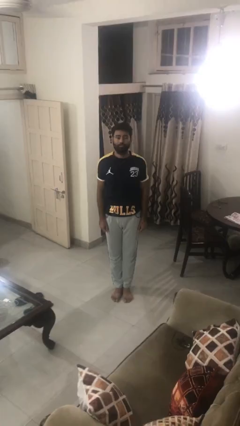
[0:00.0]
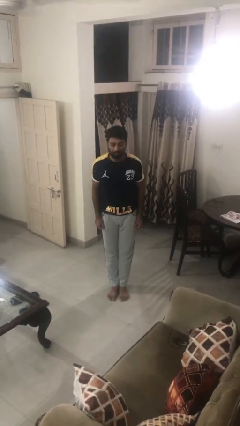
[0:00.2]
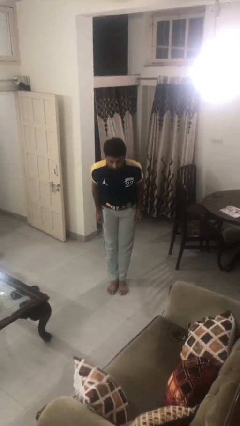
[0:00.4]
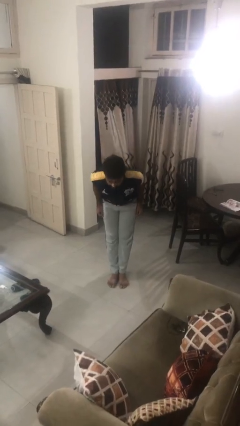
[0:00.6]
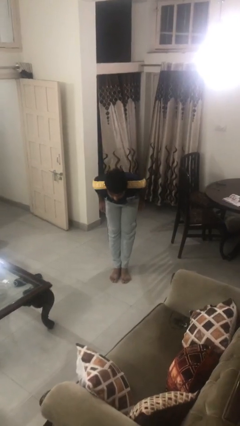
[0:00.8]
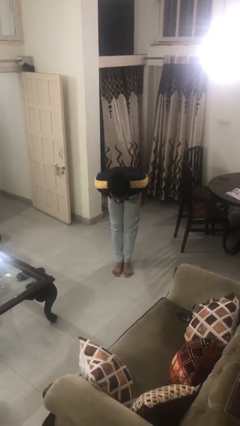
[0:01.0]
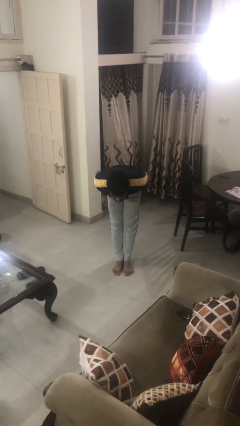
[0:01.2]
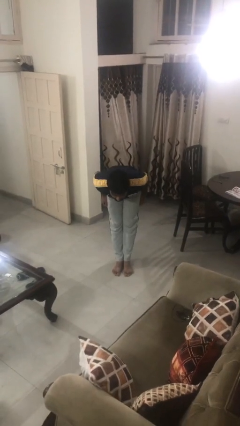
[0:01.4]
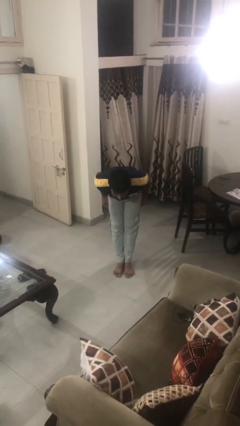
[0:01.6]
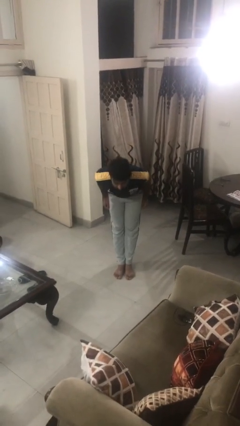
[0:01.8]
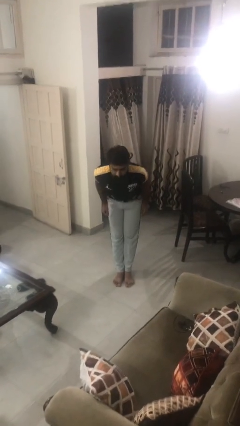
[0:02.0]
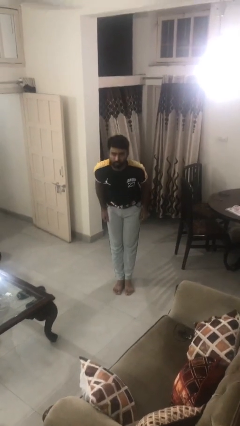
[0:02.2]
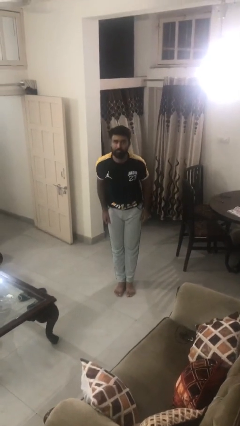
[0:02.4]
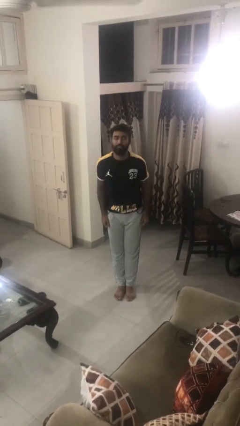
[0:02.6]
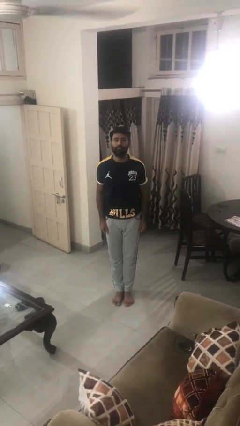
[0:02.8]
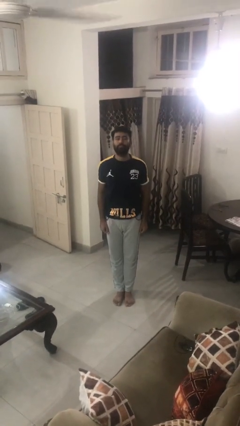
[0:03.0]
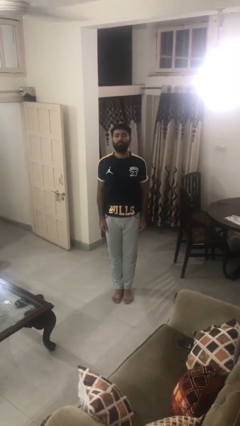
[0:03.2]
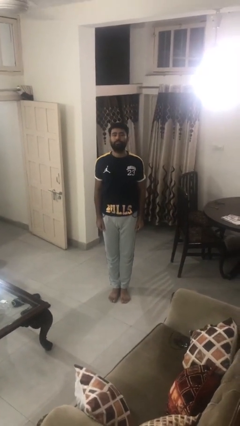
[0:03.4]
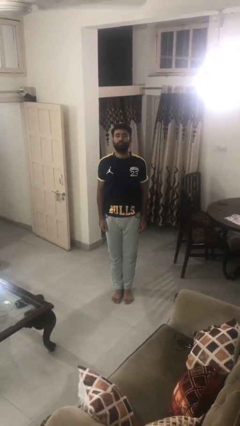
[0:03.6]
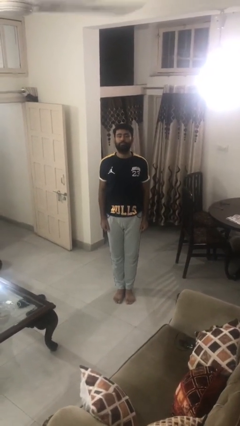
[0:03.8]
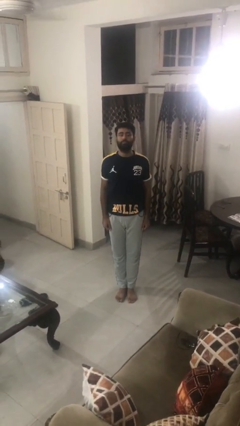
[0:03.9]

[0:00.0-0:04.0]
person bows

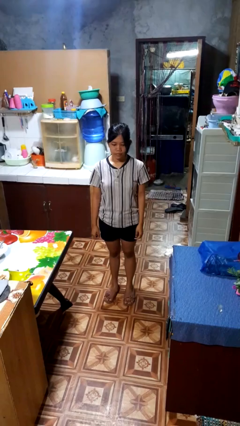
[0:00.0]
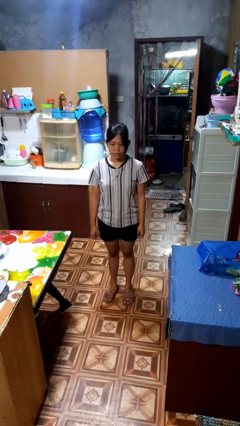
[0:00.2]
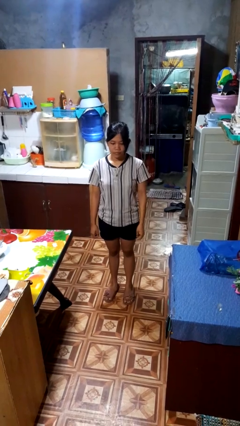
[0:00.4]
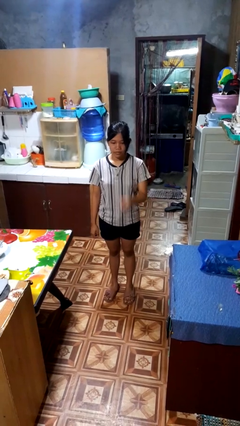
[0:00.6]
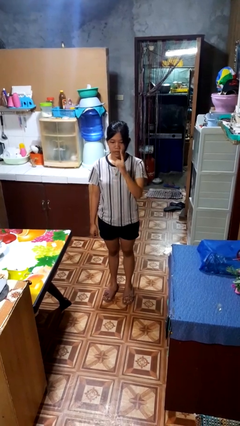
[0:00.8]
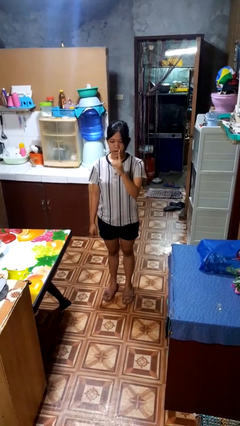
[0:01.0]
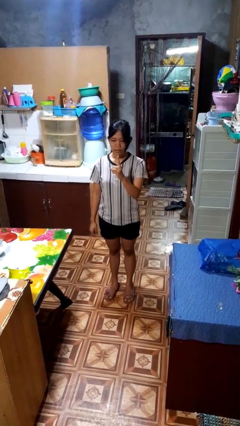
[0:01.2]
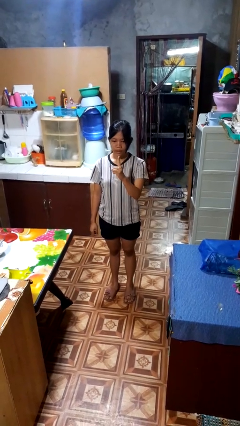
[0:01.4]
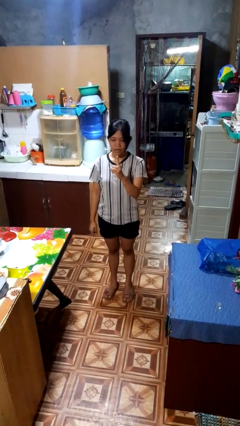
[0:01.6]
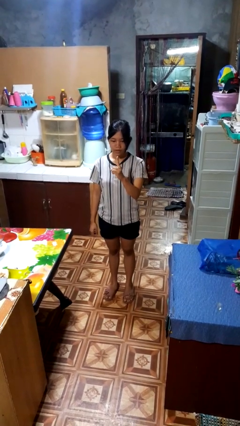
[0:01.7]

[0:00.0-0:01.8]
person gestures number one

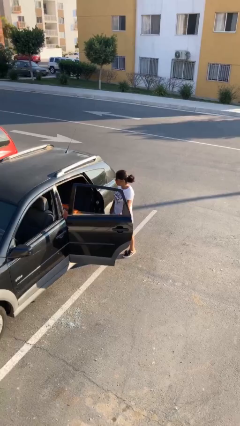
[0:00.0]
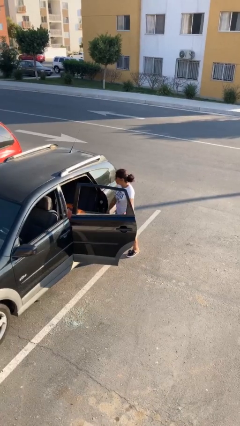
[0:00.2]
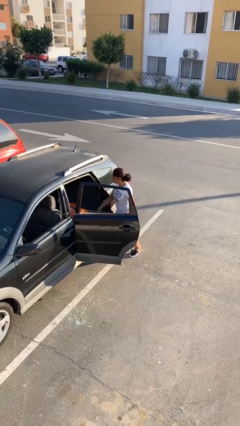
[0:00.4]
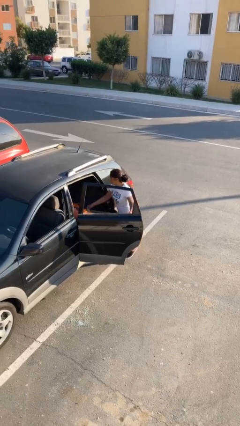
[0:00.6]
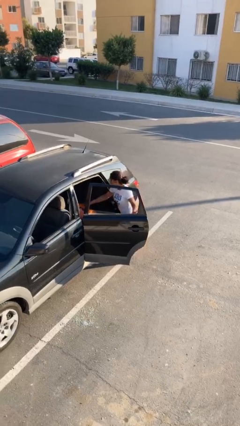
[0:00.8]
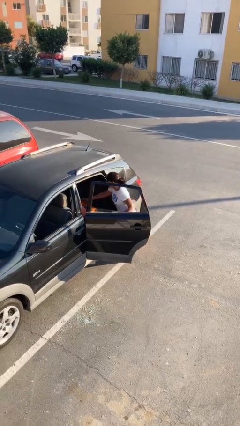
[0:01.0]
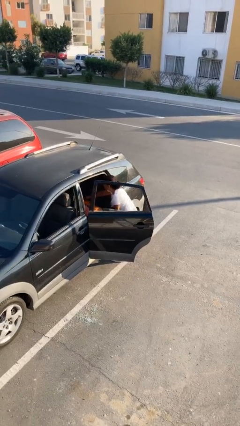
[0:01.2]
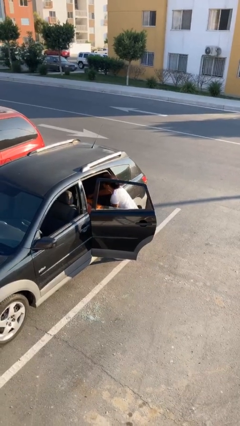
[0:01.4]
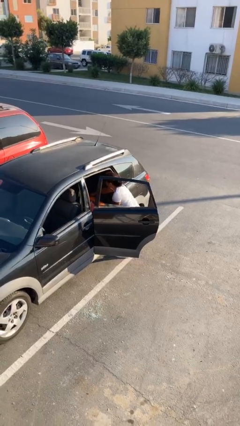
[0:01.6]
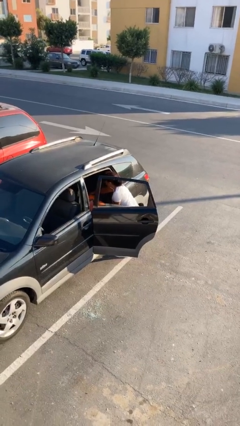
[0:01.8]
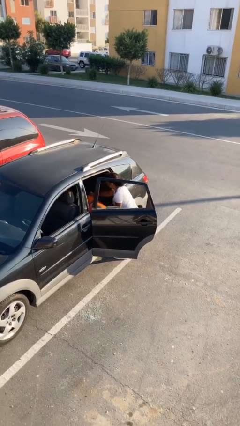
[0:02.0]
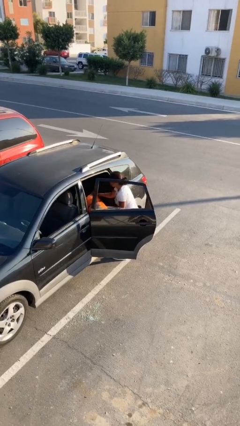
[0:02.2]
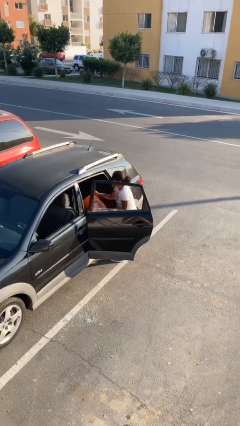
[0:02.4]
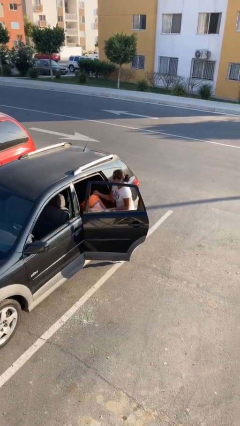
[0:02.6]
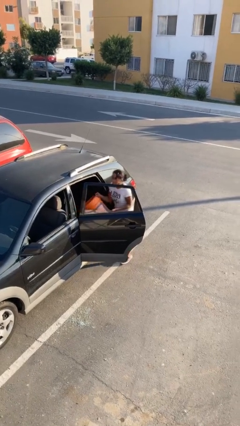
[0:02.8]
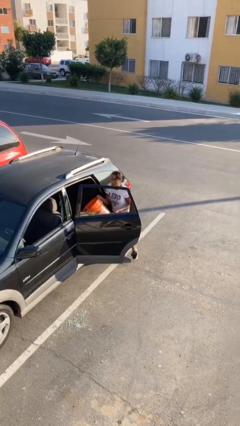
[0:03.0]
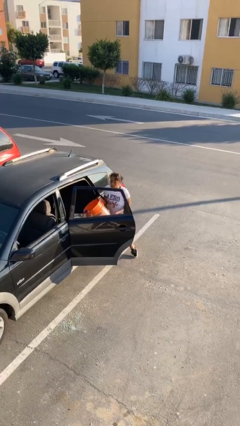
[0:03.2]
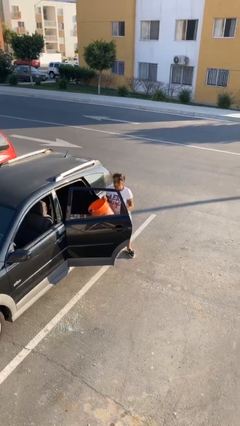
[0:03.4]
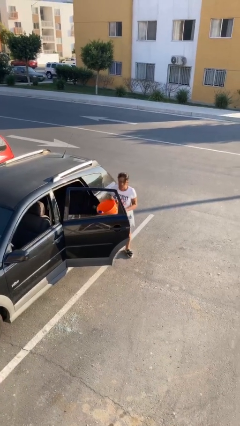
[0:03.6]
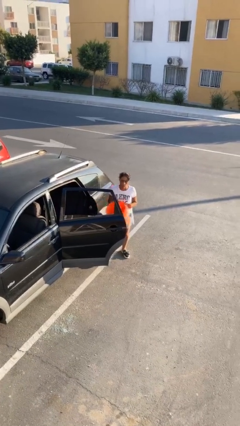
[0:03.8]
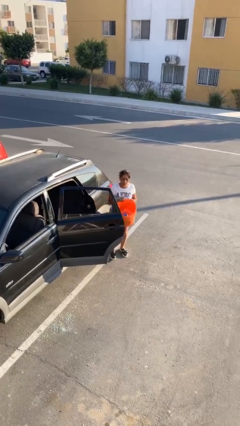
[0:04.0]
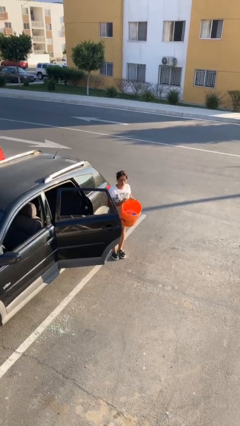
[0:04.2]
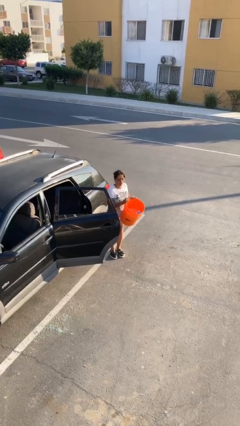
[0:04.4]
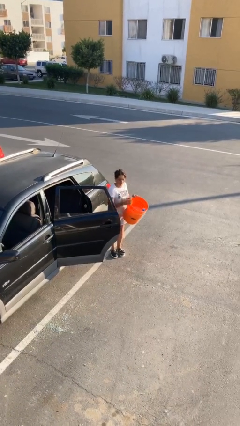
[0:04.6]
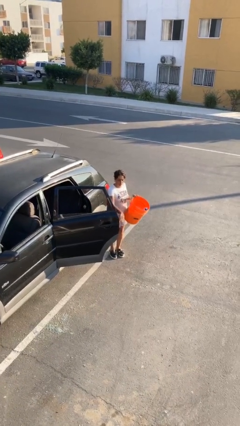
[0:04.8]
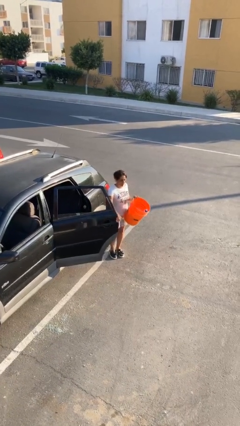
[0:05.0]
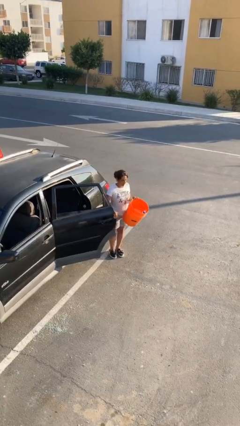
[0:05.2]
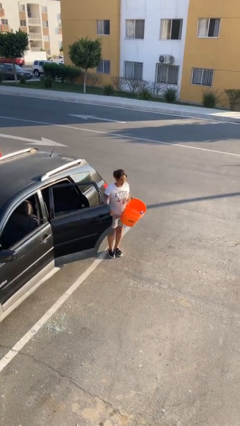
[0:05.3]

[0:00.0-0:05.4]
person unloads car

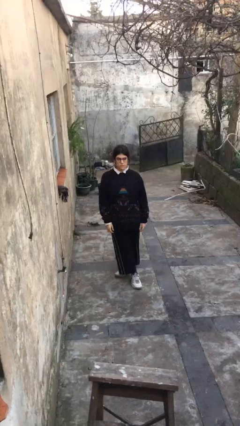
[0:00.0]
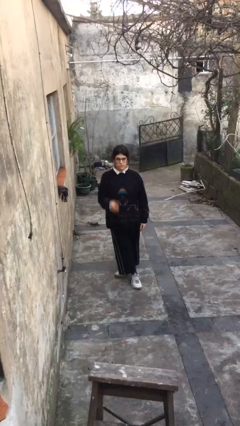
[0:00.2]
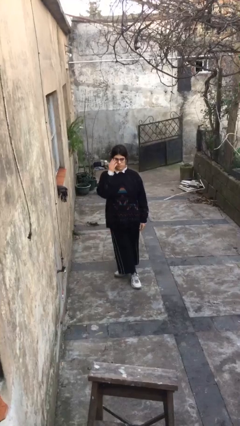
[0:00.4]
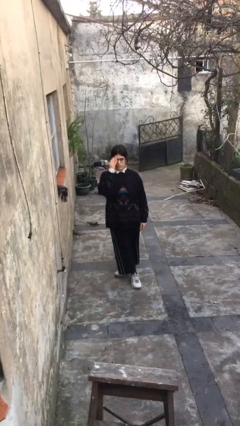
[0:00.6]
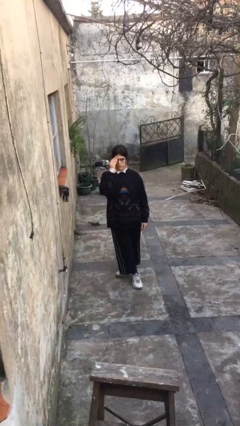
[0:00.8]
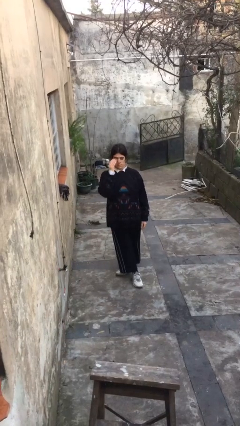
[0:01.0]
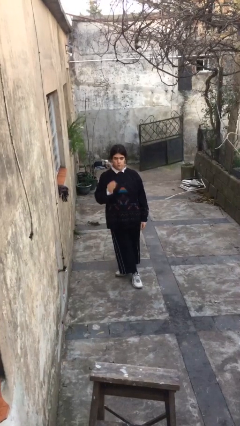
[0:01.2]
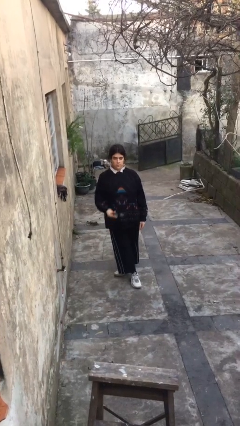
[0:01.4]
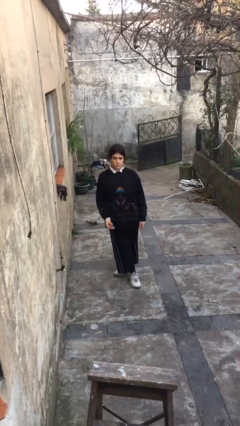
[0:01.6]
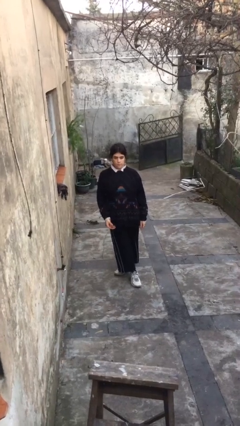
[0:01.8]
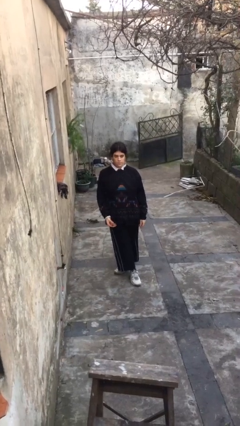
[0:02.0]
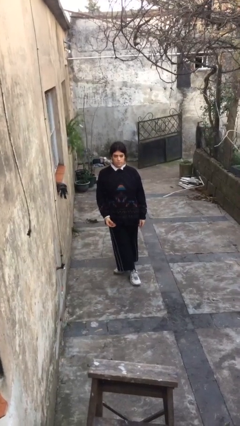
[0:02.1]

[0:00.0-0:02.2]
person takes off glasses

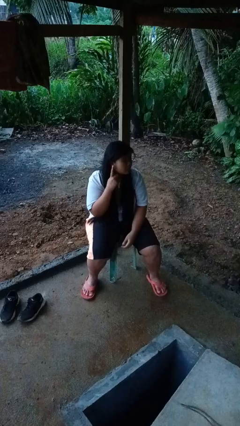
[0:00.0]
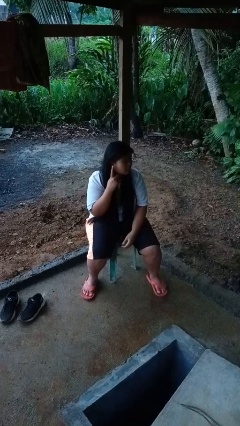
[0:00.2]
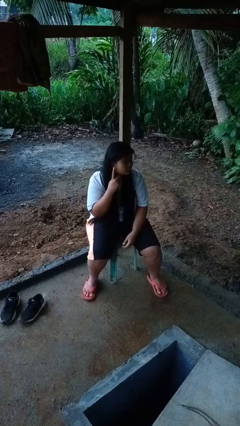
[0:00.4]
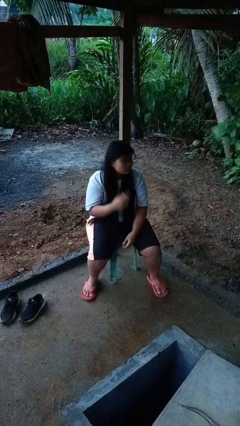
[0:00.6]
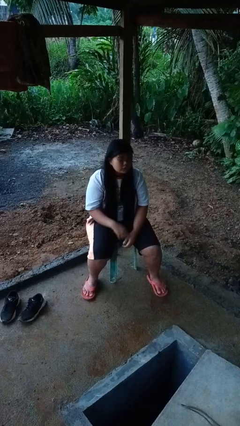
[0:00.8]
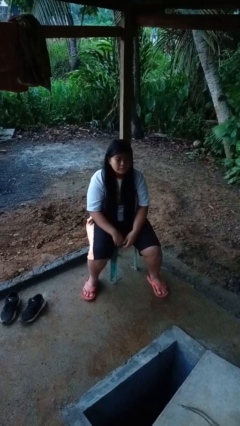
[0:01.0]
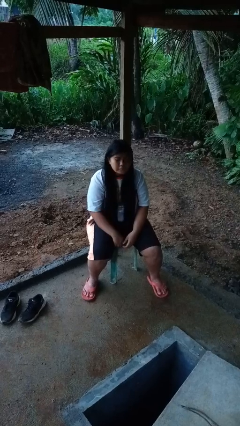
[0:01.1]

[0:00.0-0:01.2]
person gestures listen closely

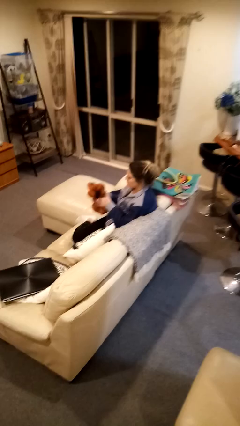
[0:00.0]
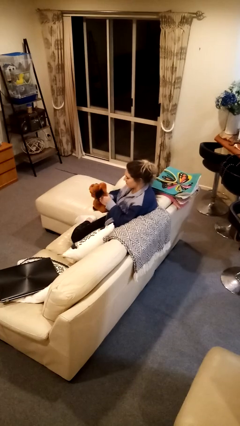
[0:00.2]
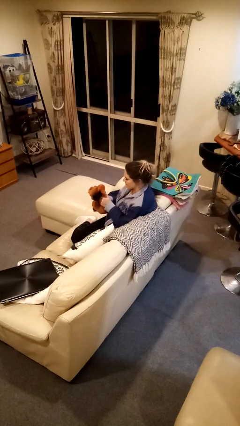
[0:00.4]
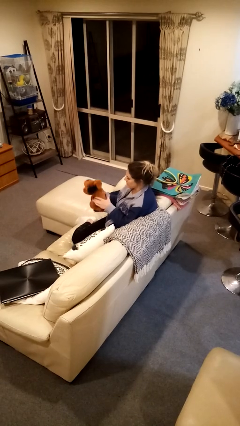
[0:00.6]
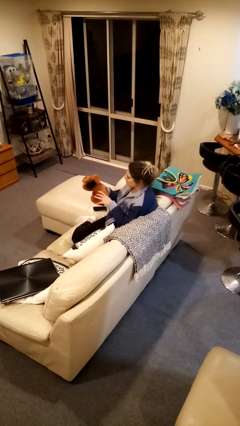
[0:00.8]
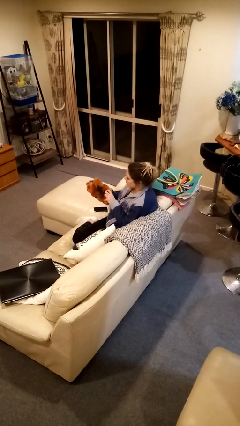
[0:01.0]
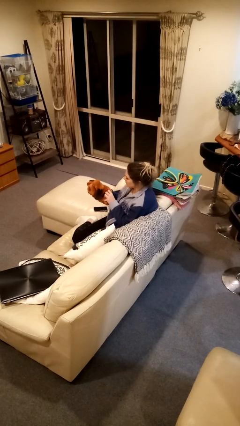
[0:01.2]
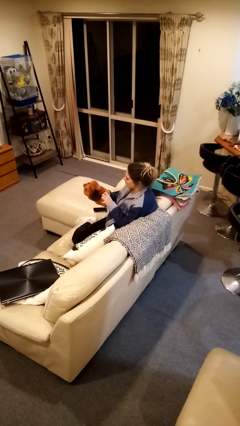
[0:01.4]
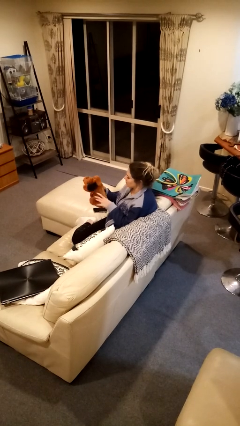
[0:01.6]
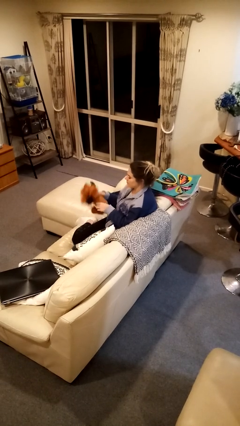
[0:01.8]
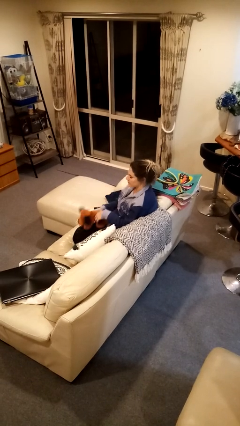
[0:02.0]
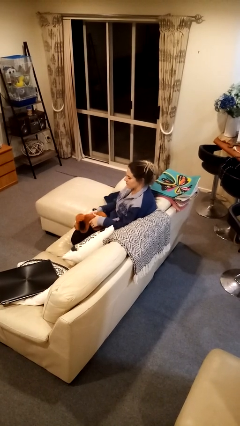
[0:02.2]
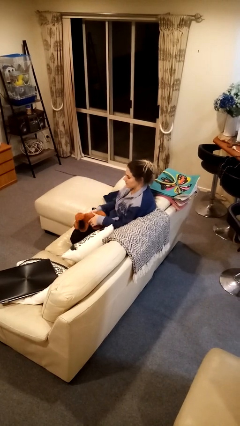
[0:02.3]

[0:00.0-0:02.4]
person squeezes object

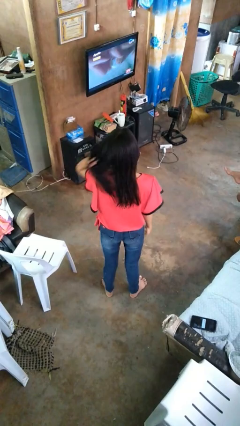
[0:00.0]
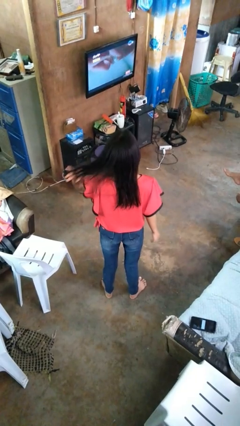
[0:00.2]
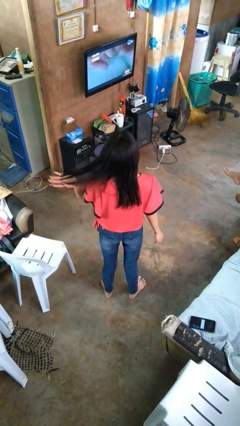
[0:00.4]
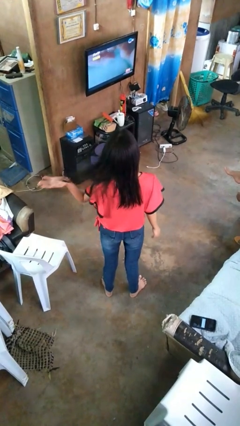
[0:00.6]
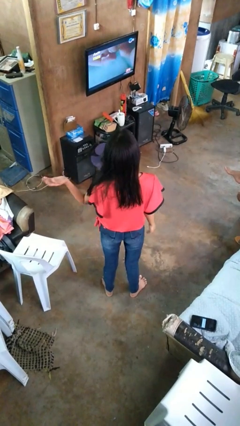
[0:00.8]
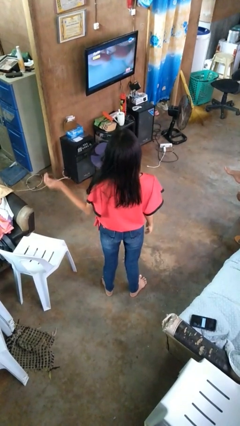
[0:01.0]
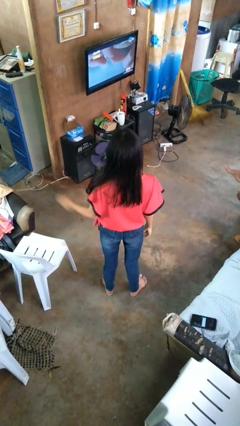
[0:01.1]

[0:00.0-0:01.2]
person strokes hair
